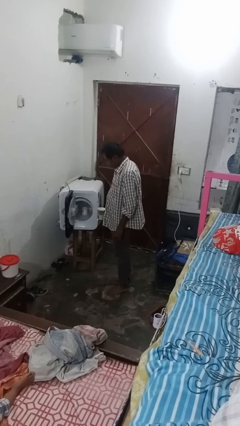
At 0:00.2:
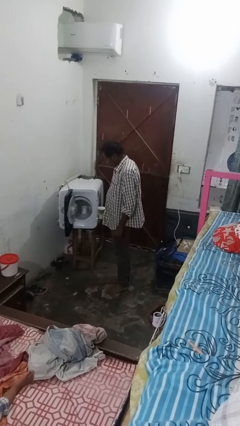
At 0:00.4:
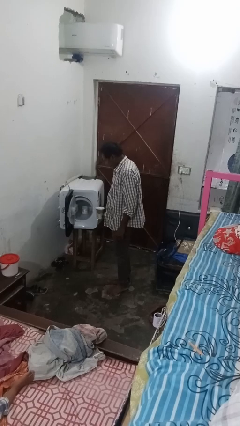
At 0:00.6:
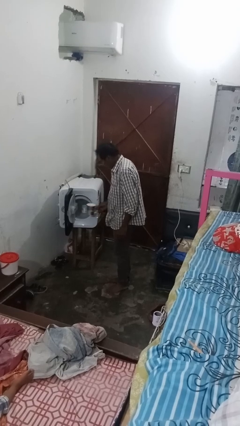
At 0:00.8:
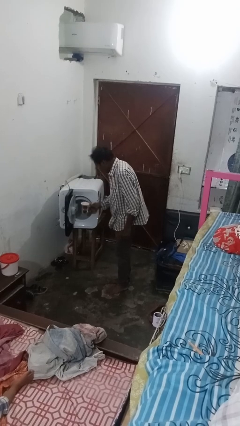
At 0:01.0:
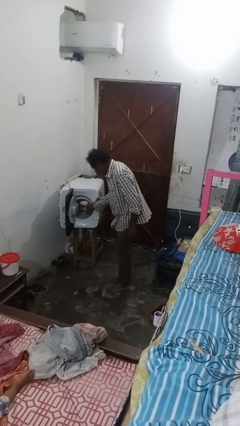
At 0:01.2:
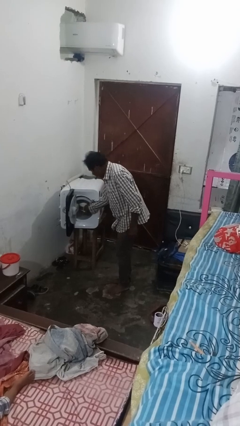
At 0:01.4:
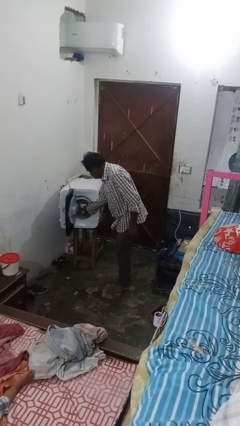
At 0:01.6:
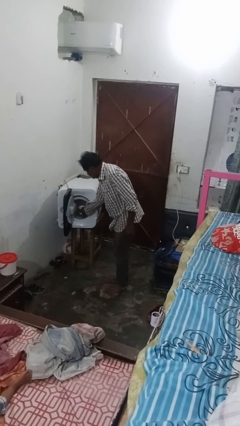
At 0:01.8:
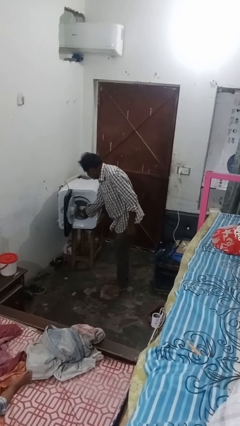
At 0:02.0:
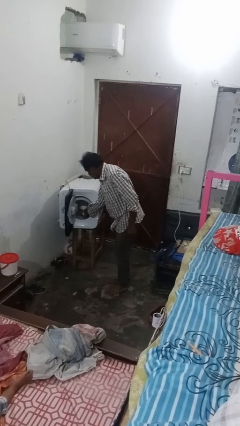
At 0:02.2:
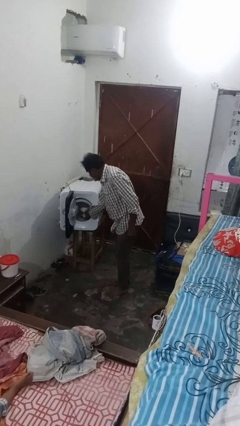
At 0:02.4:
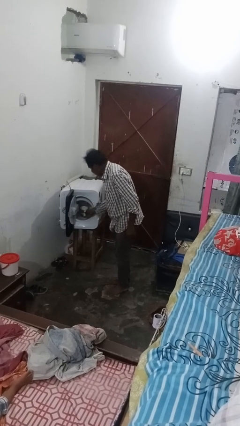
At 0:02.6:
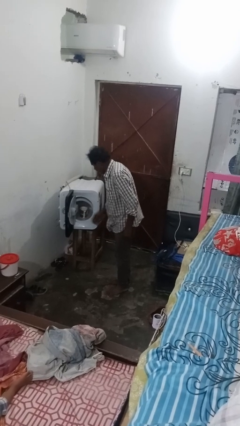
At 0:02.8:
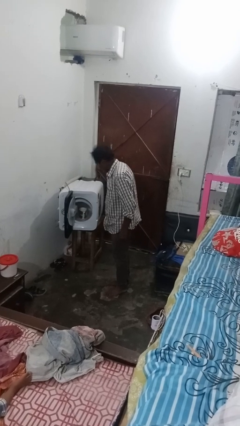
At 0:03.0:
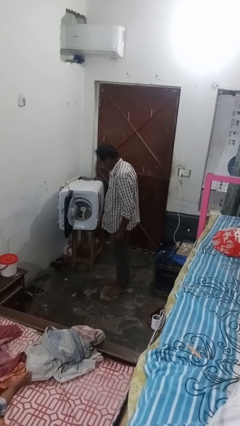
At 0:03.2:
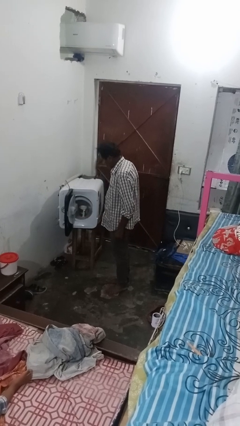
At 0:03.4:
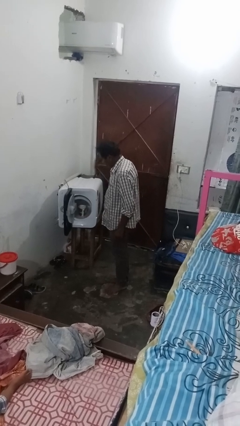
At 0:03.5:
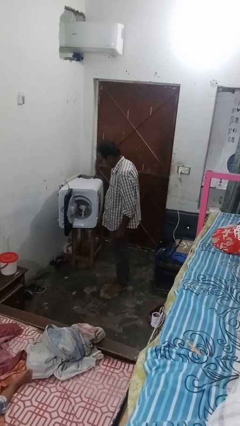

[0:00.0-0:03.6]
person loads dishwasher

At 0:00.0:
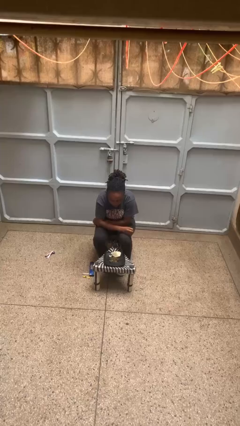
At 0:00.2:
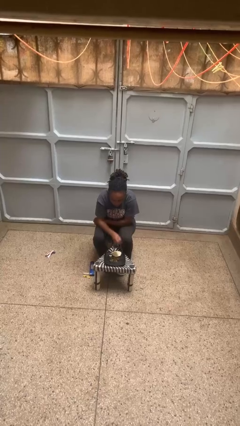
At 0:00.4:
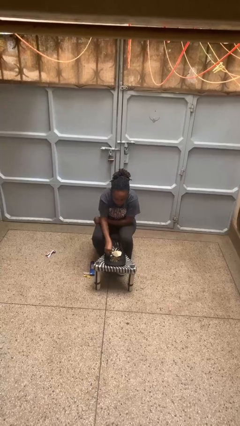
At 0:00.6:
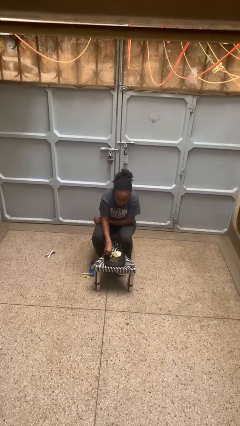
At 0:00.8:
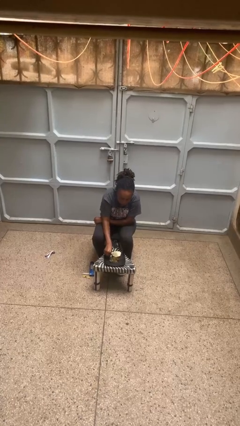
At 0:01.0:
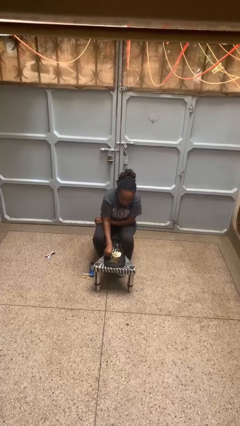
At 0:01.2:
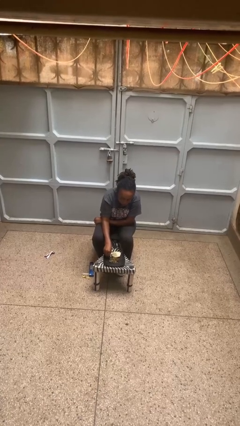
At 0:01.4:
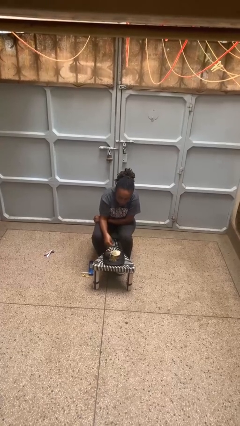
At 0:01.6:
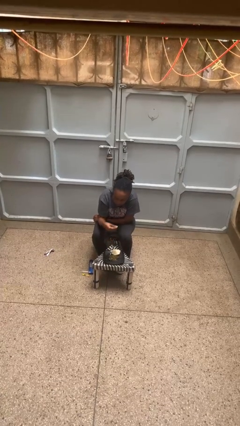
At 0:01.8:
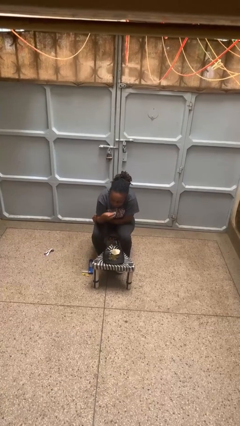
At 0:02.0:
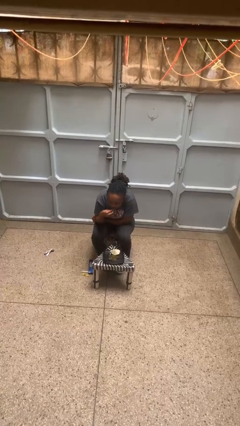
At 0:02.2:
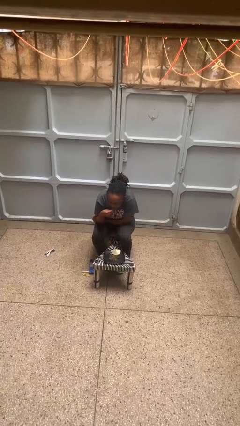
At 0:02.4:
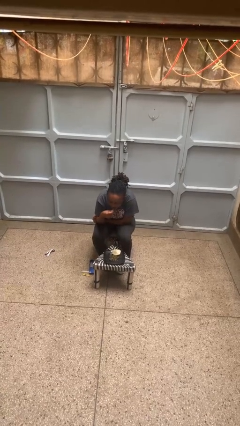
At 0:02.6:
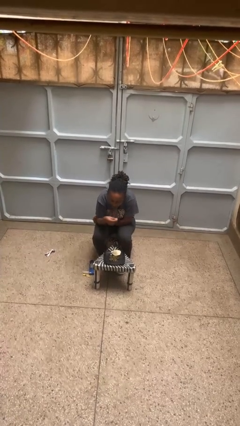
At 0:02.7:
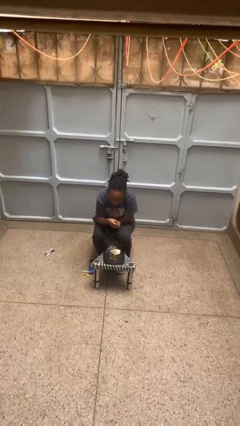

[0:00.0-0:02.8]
person eats with hands

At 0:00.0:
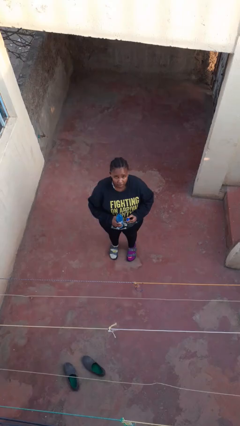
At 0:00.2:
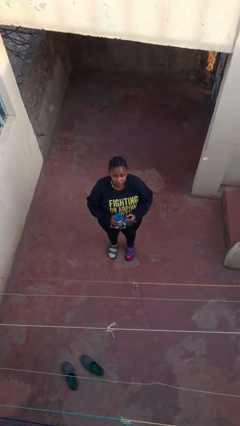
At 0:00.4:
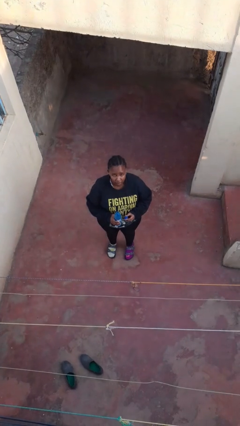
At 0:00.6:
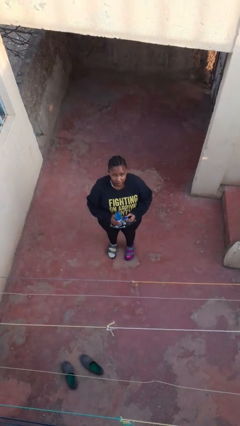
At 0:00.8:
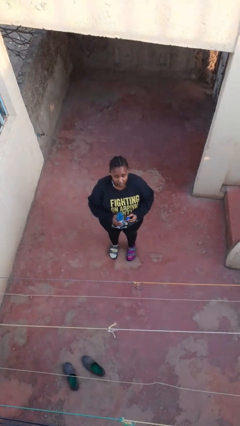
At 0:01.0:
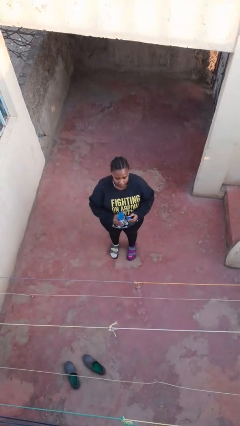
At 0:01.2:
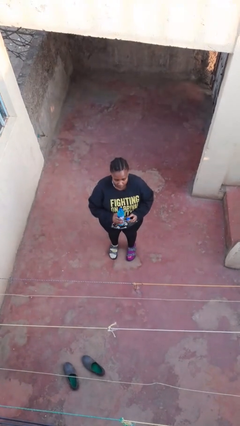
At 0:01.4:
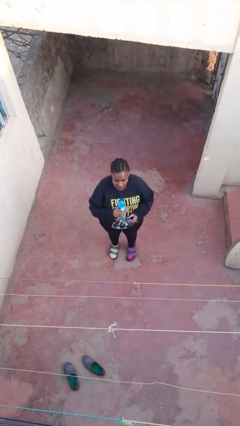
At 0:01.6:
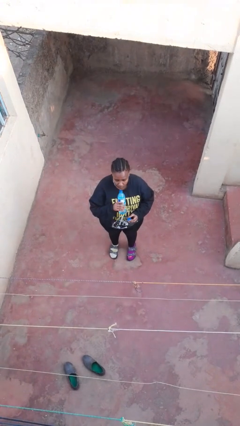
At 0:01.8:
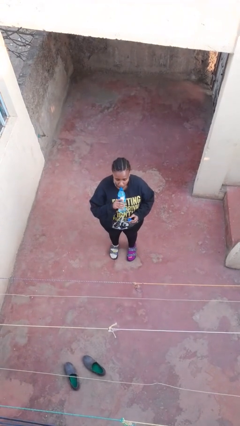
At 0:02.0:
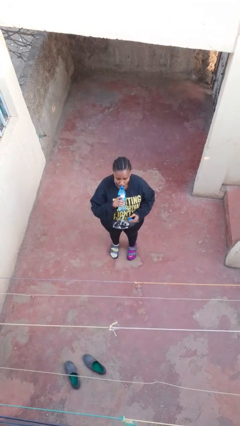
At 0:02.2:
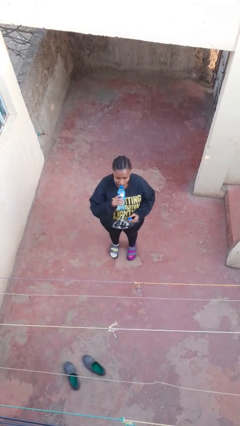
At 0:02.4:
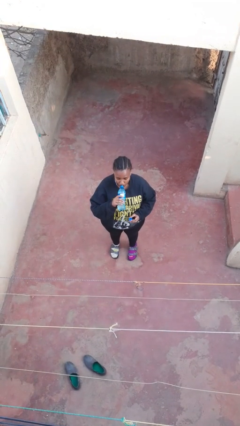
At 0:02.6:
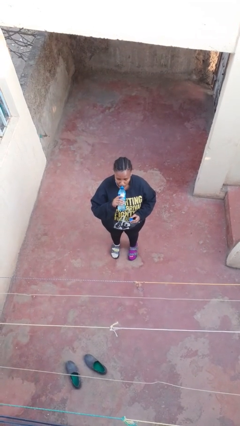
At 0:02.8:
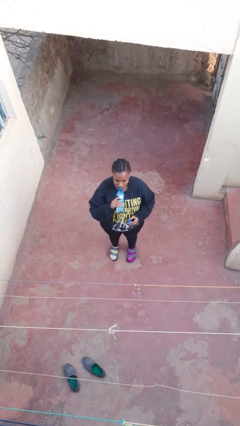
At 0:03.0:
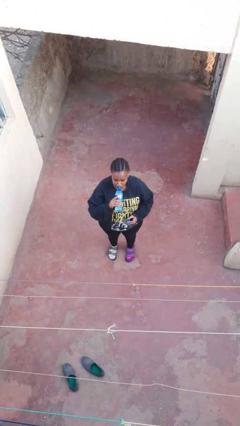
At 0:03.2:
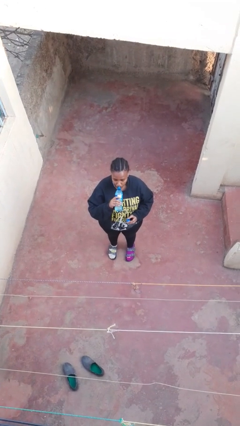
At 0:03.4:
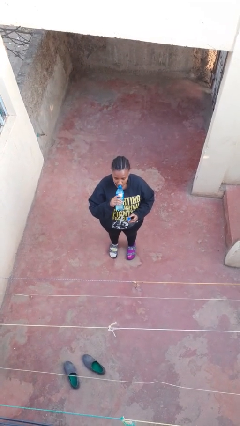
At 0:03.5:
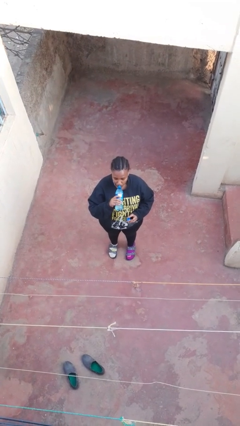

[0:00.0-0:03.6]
person drinks from bottle

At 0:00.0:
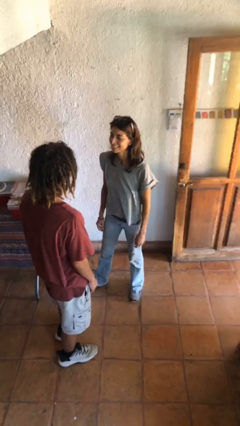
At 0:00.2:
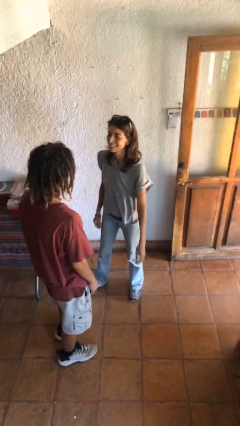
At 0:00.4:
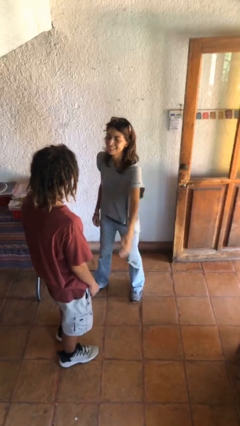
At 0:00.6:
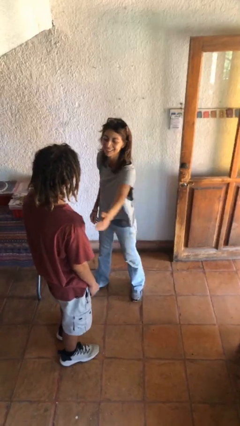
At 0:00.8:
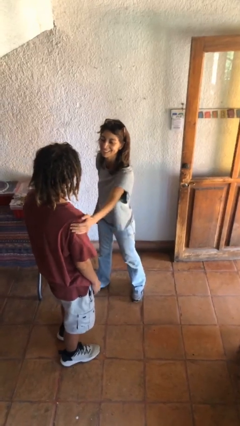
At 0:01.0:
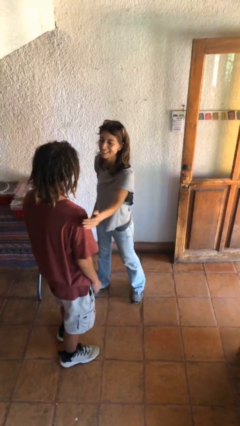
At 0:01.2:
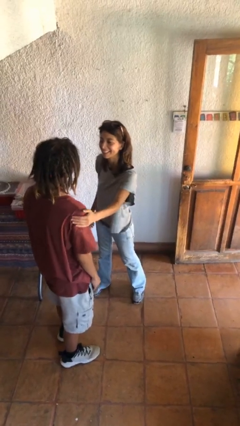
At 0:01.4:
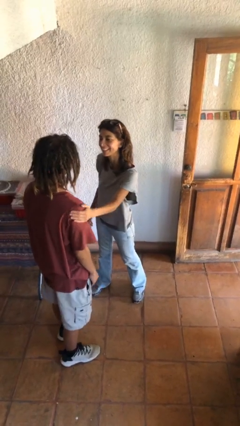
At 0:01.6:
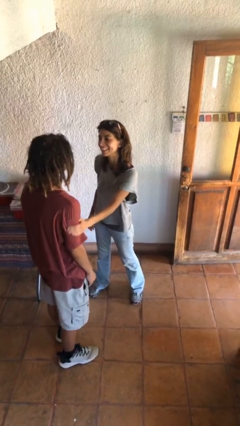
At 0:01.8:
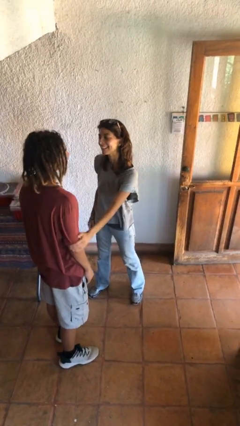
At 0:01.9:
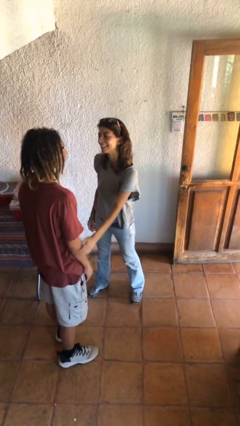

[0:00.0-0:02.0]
person pounds shoulders of person

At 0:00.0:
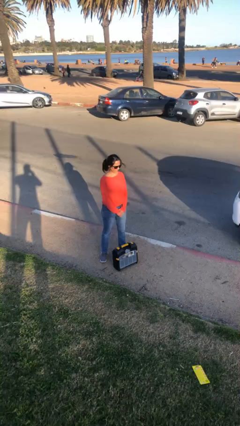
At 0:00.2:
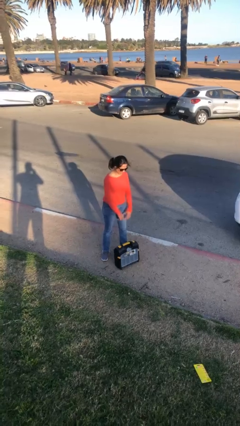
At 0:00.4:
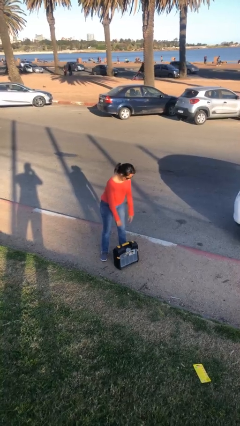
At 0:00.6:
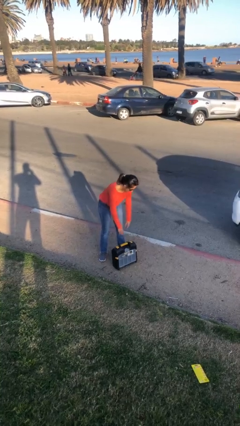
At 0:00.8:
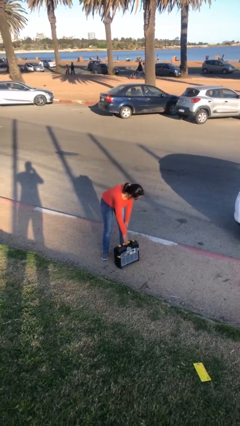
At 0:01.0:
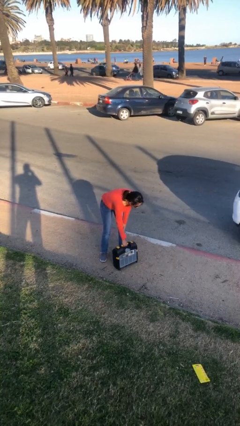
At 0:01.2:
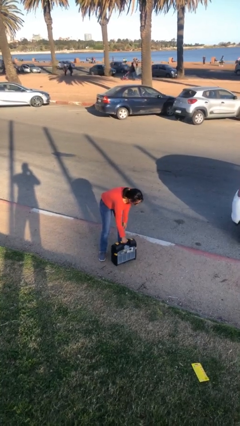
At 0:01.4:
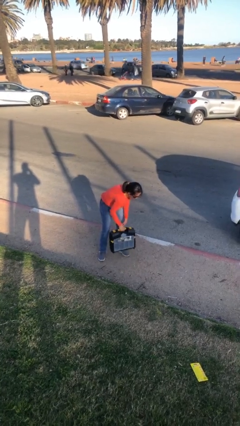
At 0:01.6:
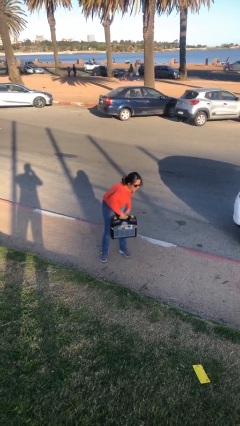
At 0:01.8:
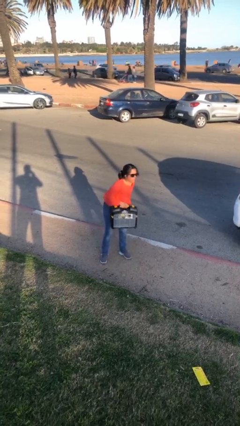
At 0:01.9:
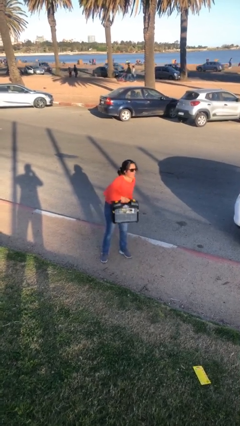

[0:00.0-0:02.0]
person picks up object from floor

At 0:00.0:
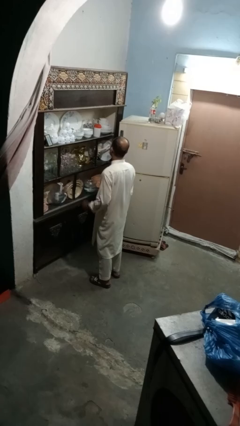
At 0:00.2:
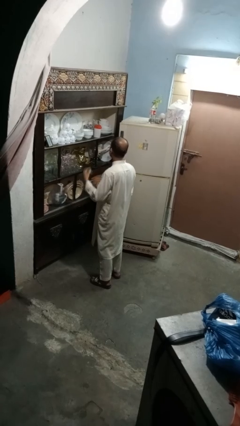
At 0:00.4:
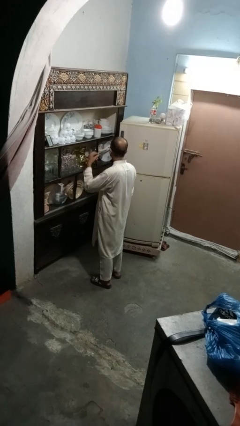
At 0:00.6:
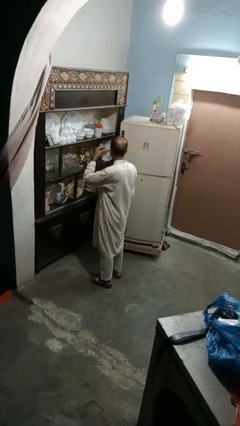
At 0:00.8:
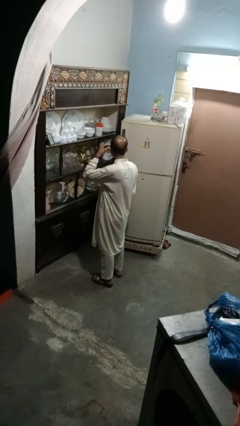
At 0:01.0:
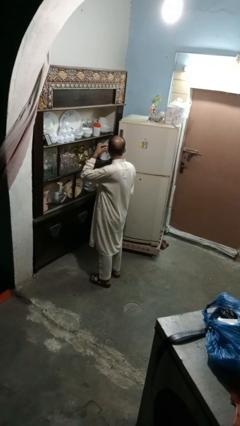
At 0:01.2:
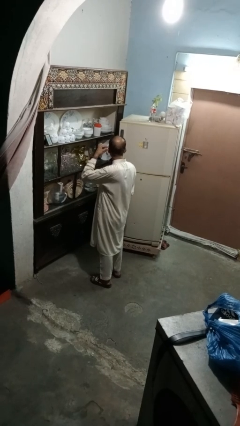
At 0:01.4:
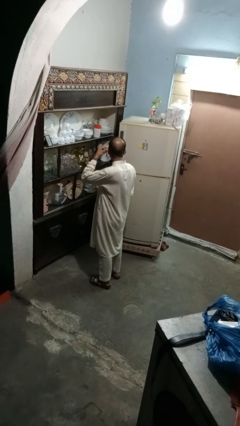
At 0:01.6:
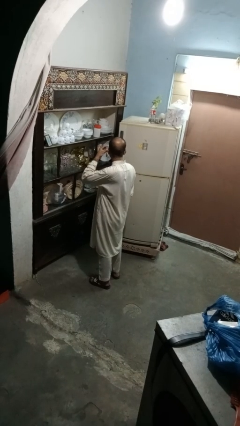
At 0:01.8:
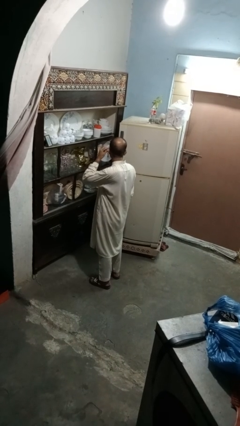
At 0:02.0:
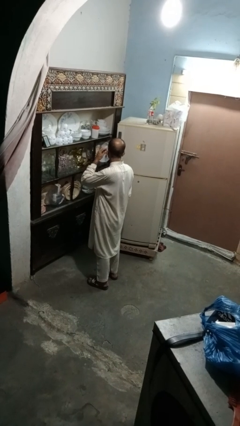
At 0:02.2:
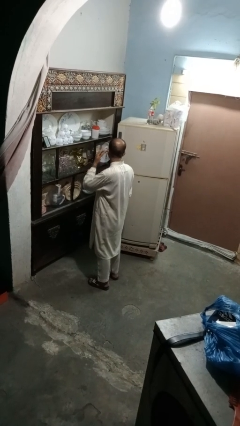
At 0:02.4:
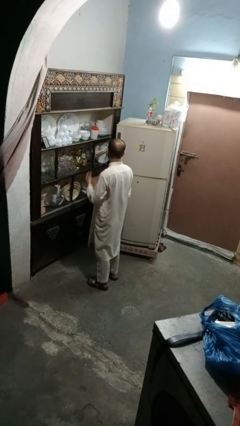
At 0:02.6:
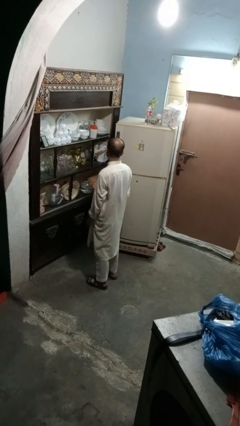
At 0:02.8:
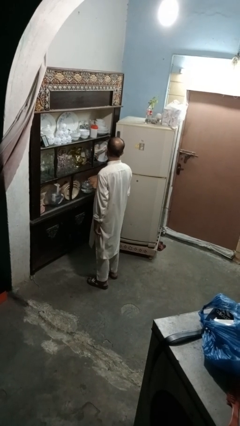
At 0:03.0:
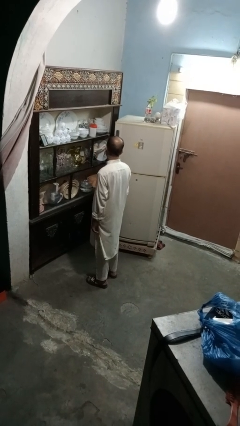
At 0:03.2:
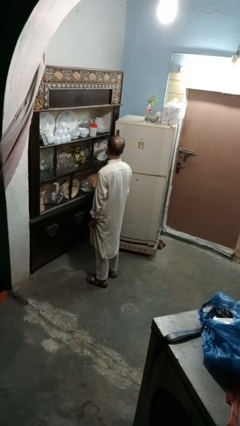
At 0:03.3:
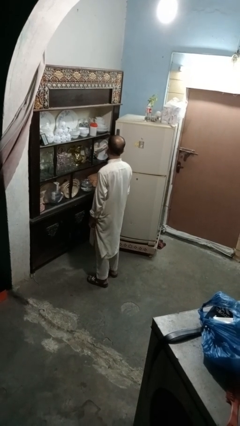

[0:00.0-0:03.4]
person puts on earrings
